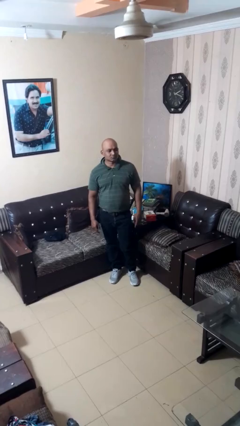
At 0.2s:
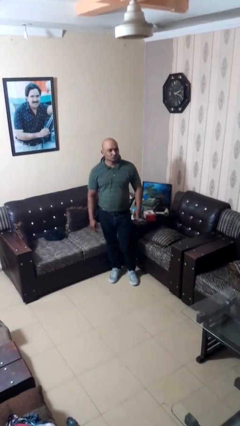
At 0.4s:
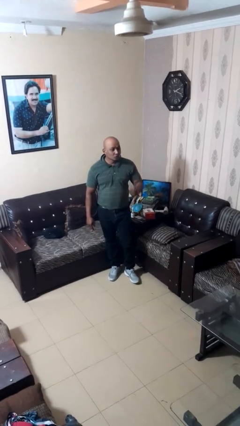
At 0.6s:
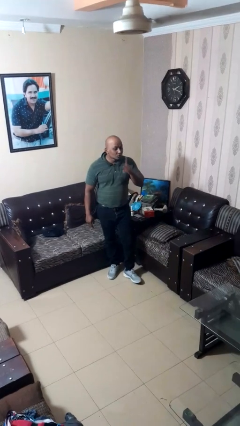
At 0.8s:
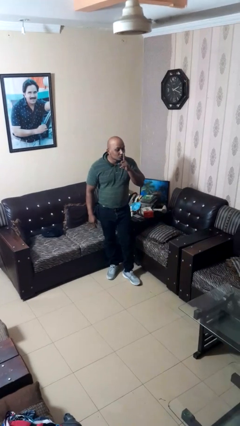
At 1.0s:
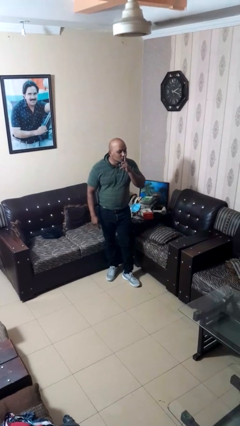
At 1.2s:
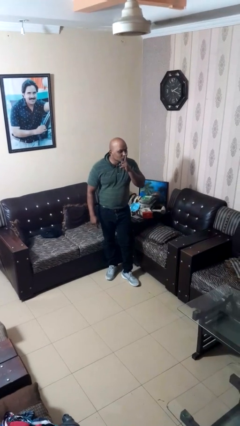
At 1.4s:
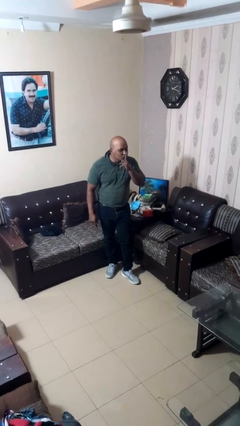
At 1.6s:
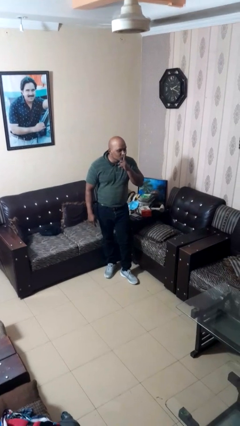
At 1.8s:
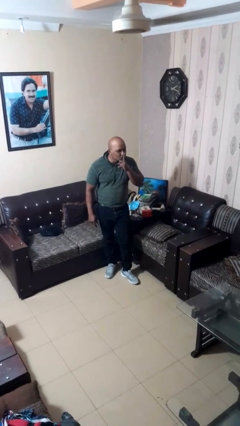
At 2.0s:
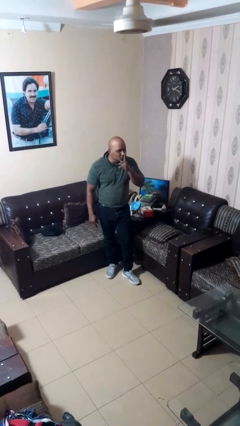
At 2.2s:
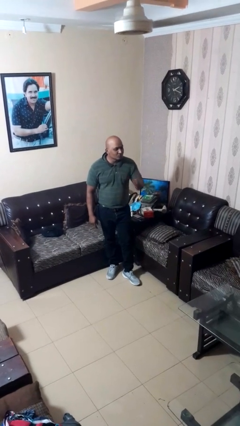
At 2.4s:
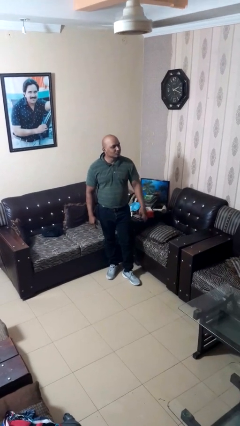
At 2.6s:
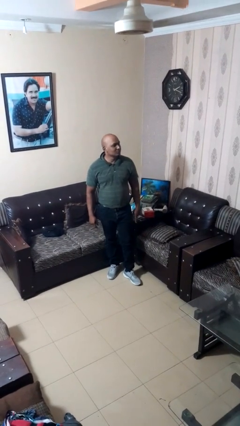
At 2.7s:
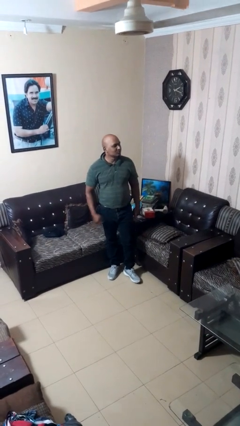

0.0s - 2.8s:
person gestures be quiet

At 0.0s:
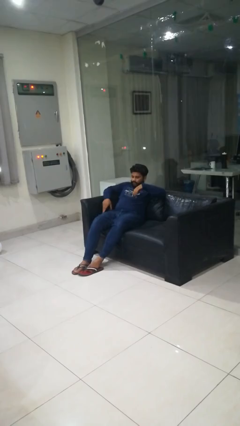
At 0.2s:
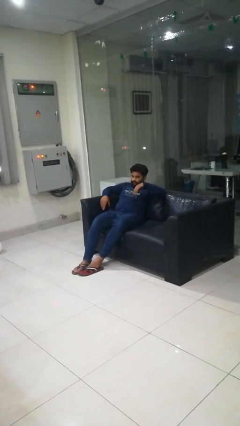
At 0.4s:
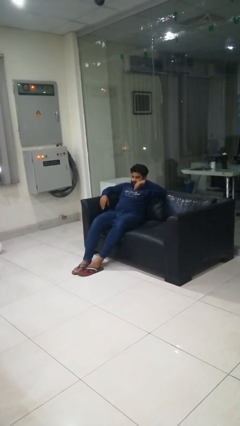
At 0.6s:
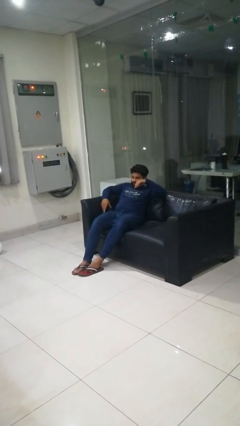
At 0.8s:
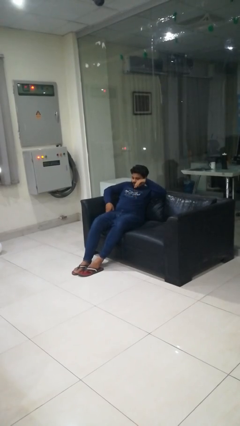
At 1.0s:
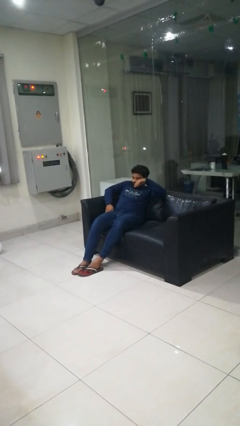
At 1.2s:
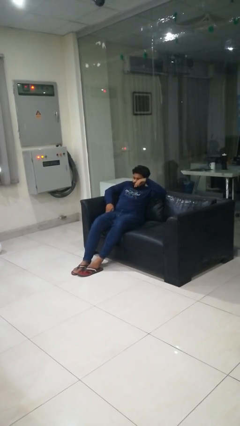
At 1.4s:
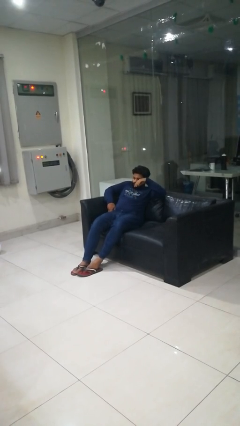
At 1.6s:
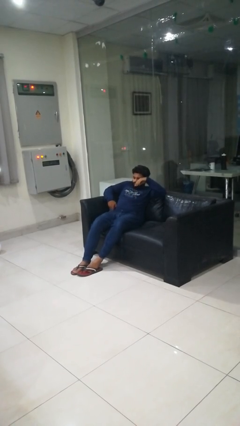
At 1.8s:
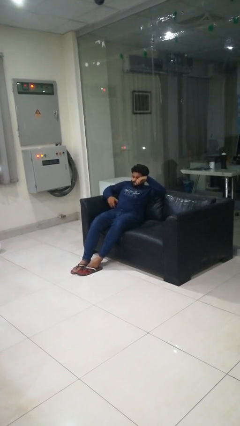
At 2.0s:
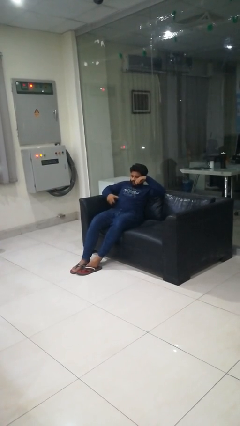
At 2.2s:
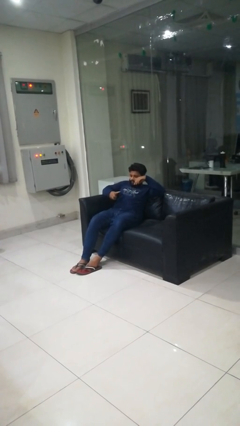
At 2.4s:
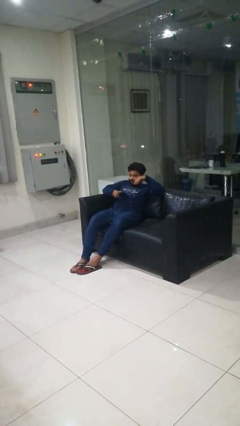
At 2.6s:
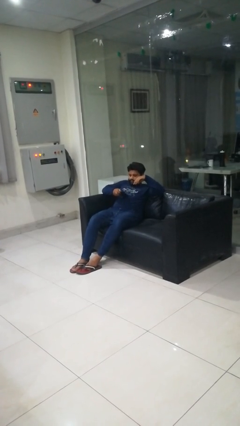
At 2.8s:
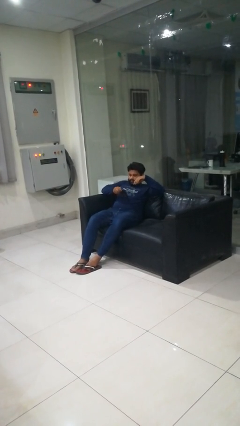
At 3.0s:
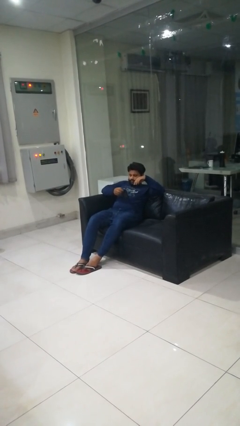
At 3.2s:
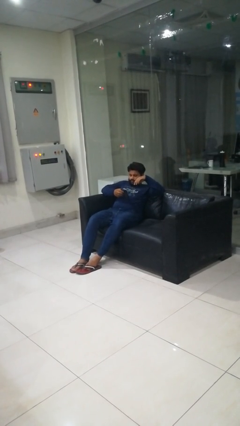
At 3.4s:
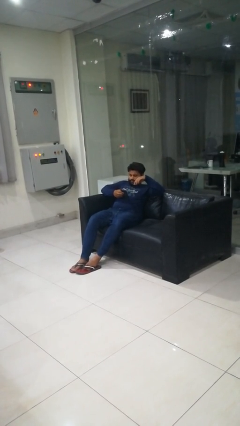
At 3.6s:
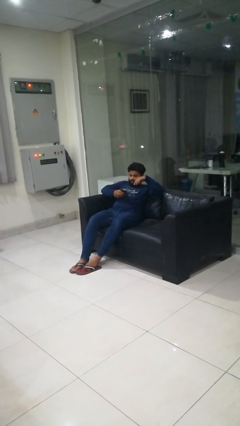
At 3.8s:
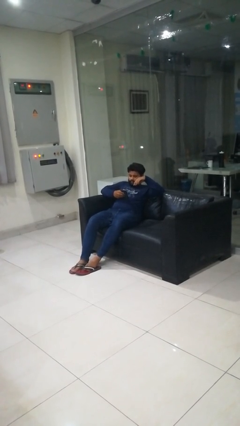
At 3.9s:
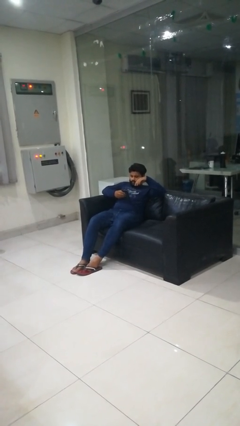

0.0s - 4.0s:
person takes phone from pocket

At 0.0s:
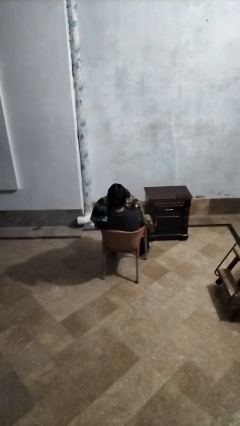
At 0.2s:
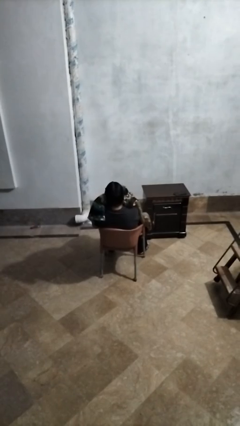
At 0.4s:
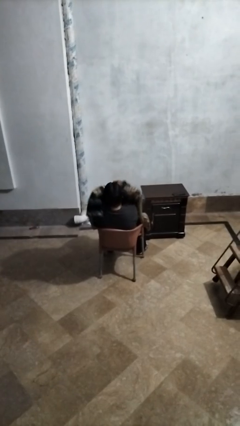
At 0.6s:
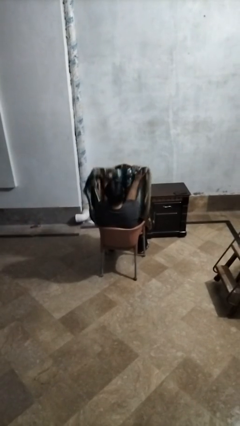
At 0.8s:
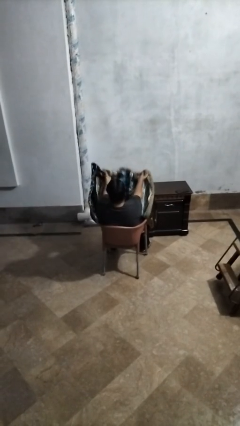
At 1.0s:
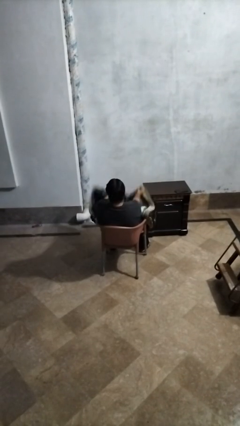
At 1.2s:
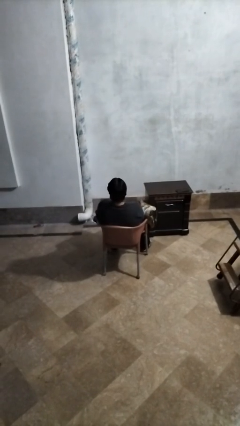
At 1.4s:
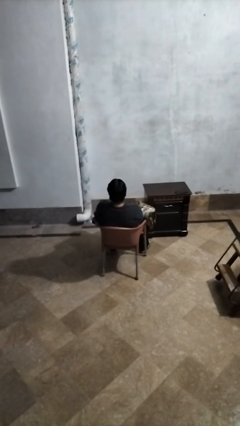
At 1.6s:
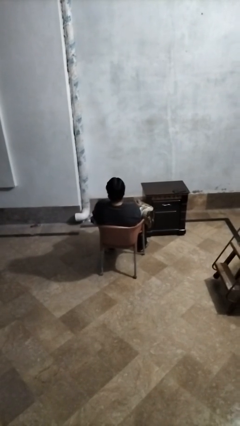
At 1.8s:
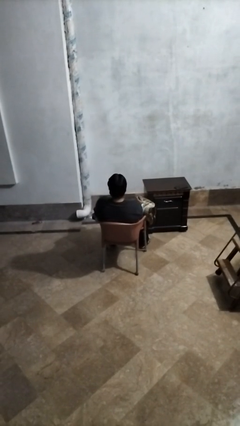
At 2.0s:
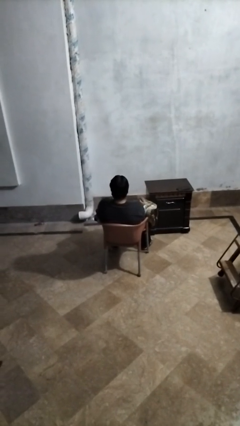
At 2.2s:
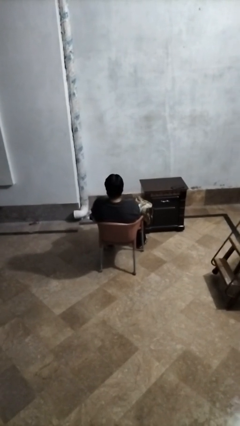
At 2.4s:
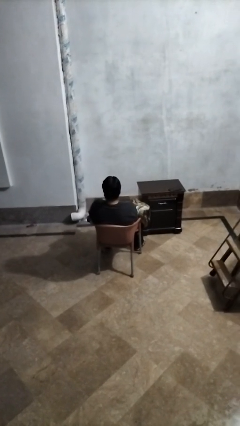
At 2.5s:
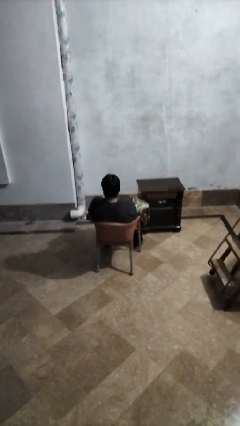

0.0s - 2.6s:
person uncovers with blanket

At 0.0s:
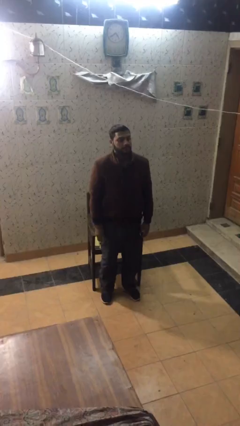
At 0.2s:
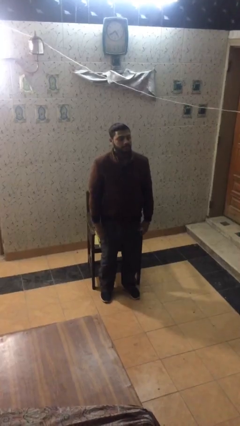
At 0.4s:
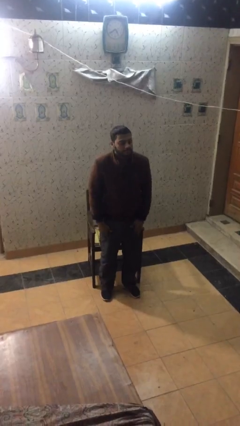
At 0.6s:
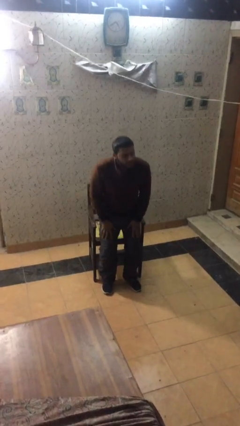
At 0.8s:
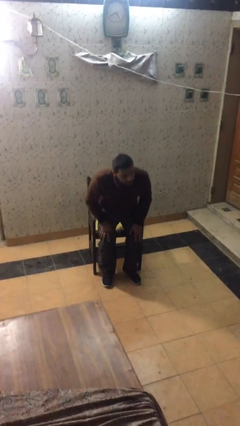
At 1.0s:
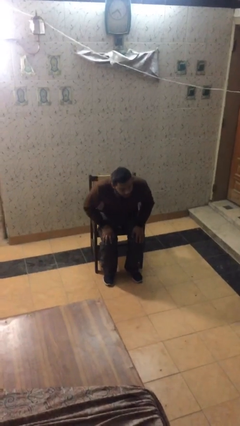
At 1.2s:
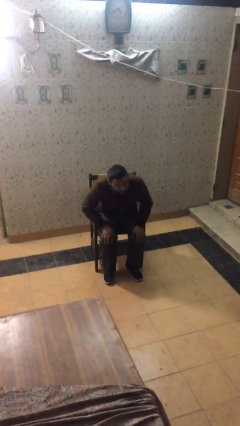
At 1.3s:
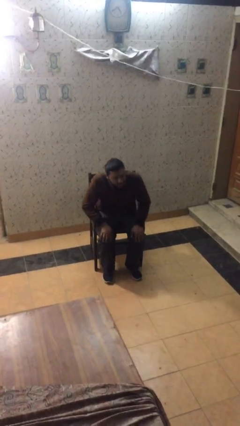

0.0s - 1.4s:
person sits down

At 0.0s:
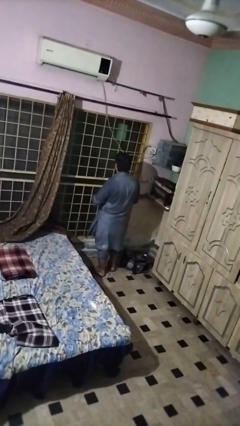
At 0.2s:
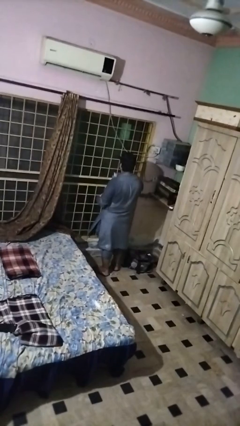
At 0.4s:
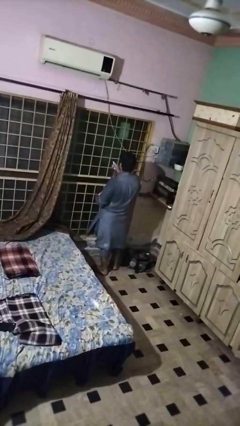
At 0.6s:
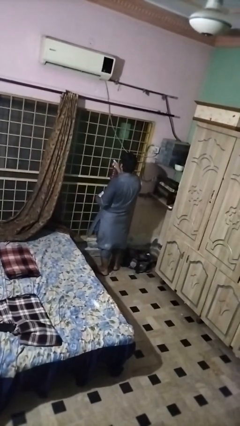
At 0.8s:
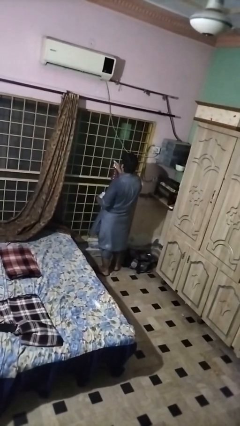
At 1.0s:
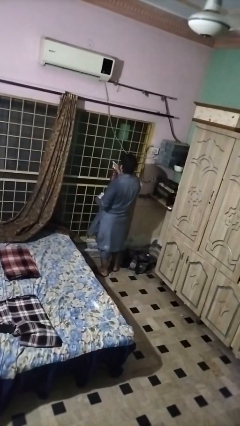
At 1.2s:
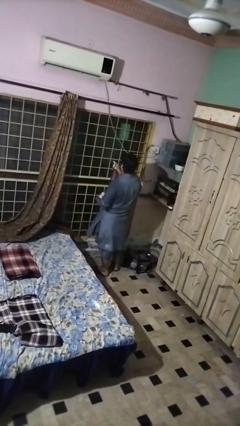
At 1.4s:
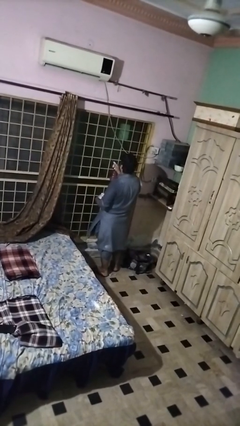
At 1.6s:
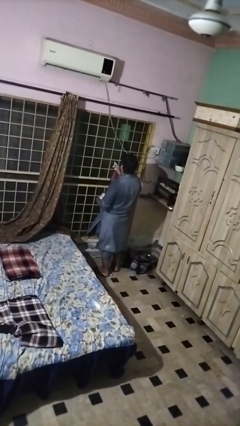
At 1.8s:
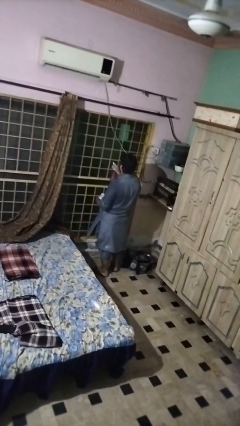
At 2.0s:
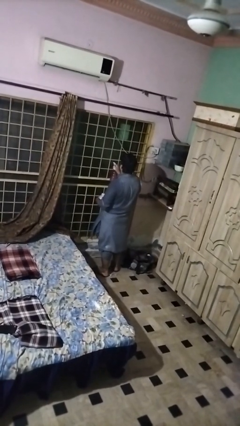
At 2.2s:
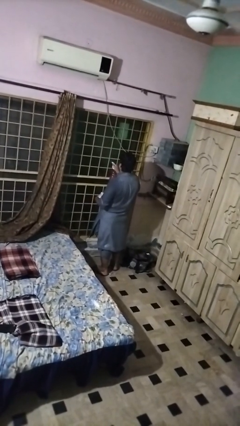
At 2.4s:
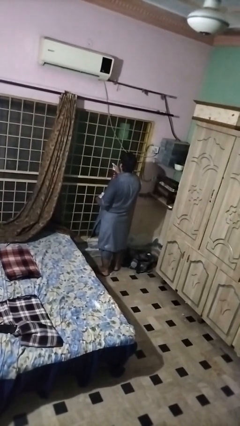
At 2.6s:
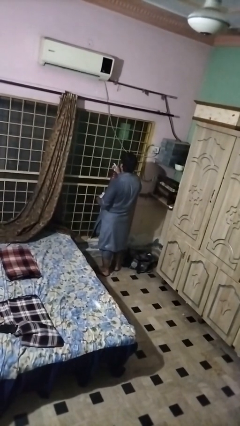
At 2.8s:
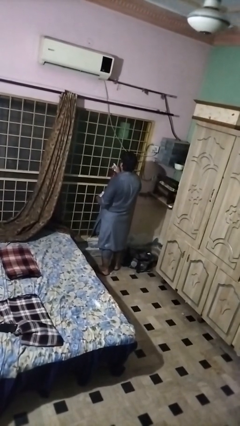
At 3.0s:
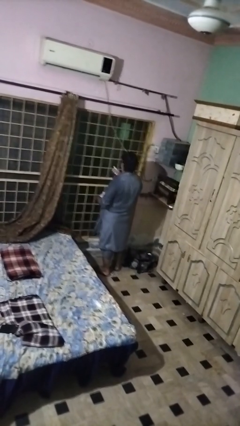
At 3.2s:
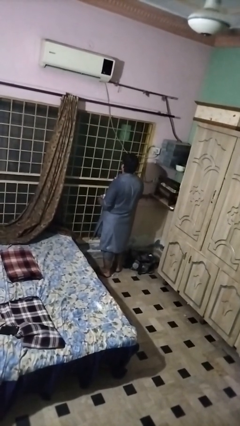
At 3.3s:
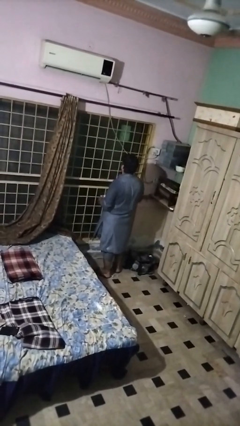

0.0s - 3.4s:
person sprays from bottle

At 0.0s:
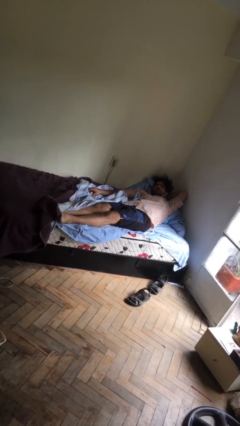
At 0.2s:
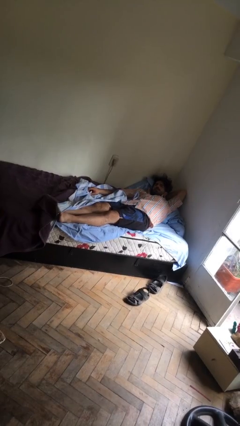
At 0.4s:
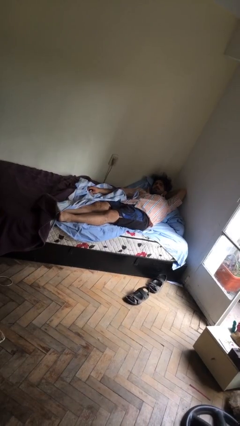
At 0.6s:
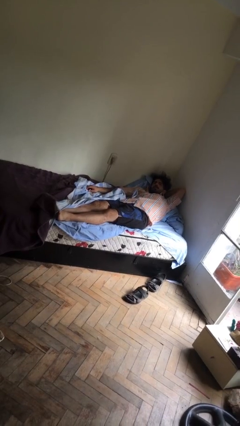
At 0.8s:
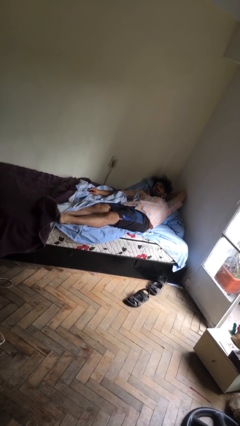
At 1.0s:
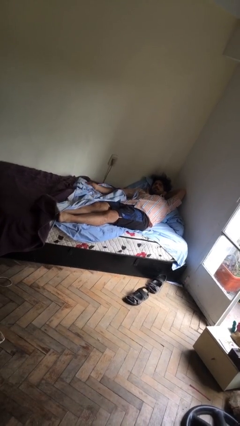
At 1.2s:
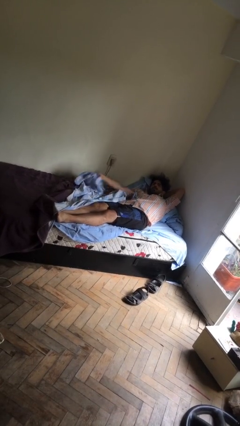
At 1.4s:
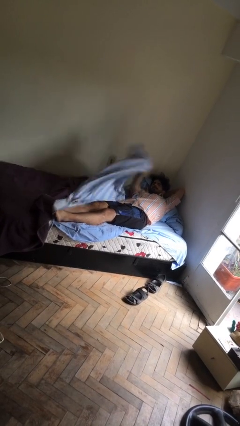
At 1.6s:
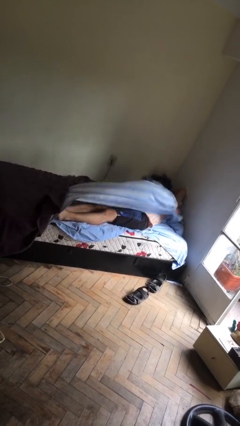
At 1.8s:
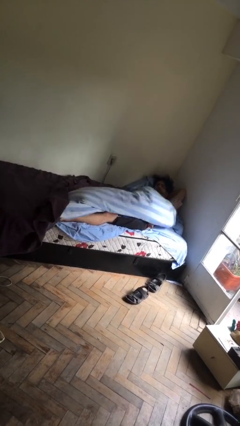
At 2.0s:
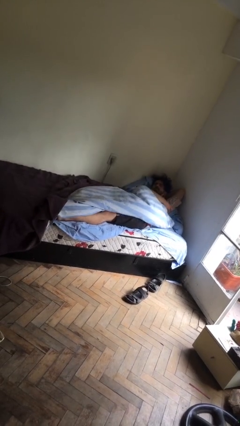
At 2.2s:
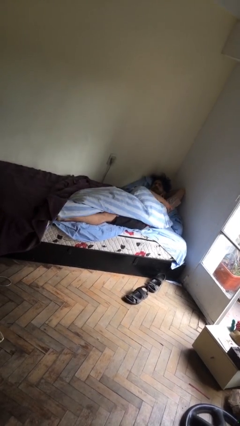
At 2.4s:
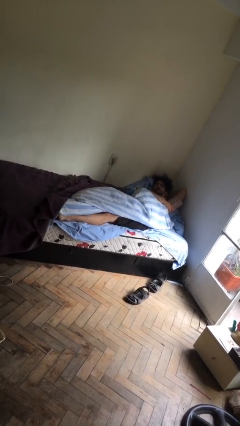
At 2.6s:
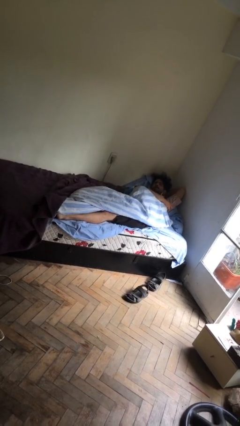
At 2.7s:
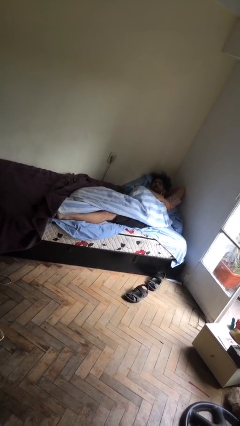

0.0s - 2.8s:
person covers with bedsheets

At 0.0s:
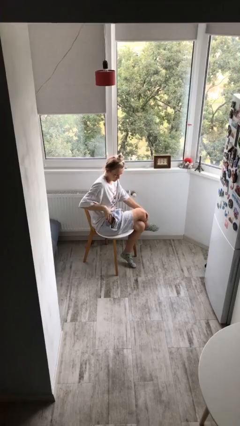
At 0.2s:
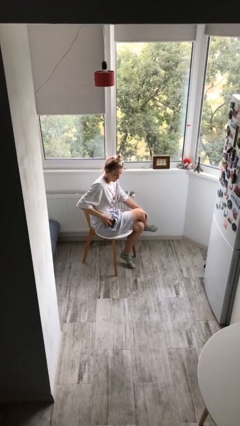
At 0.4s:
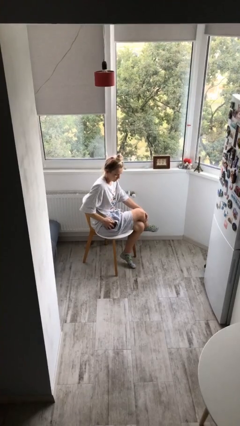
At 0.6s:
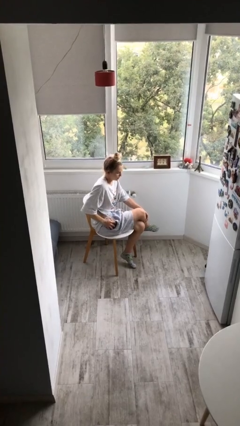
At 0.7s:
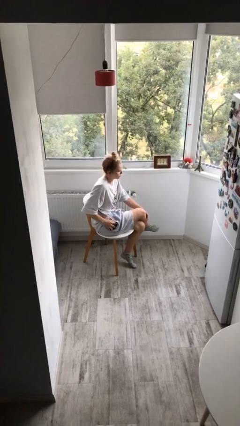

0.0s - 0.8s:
person puts phone into pocket
